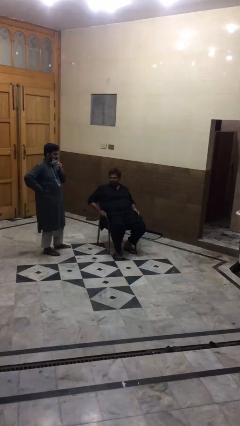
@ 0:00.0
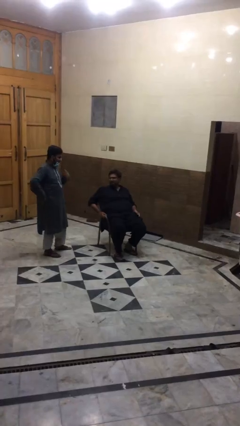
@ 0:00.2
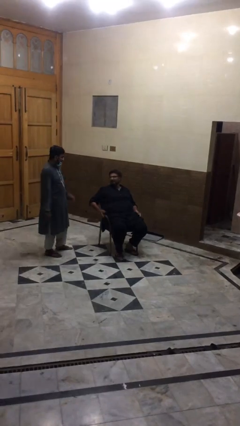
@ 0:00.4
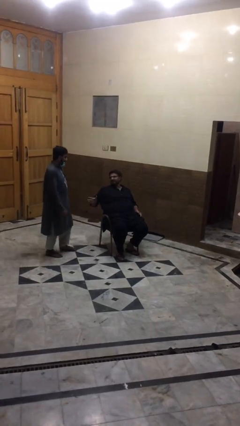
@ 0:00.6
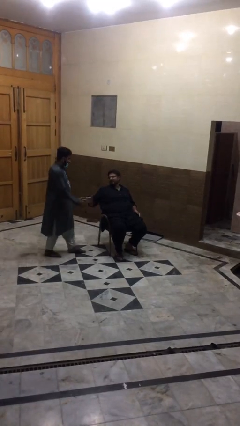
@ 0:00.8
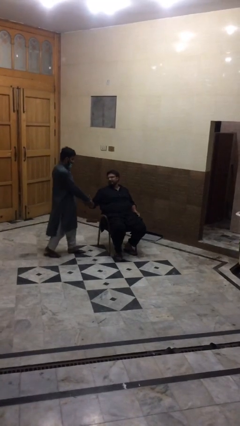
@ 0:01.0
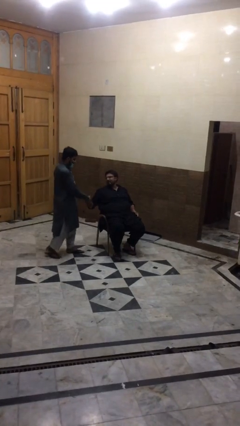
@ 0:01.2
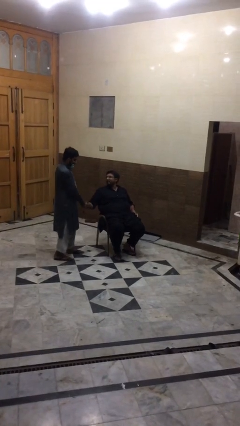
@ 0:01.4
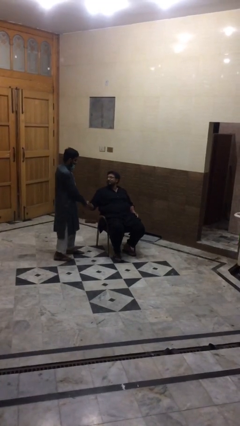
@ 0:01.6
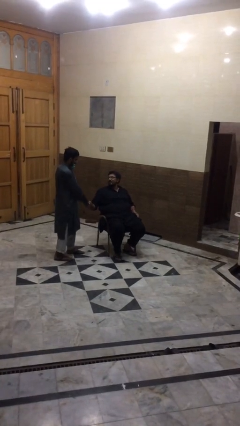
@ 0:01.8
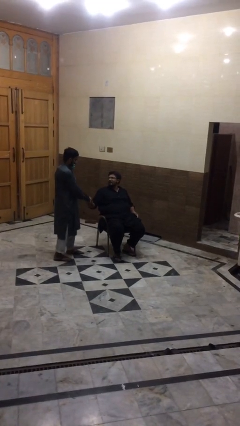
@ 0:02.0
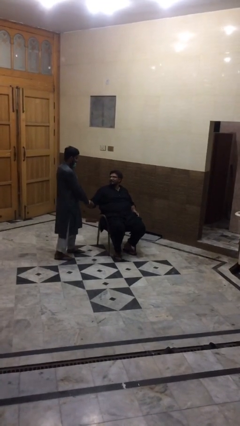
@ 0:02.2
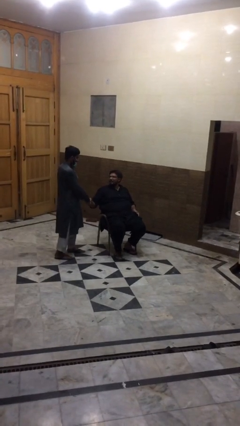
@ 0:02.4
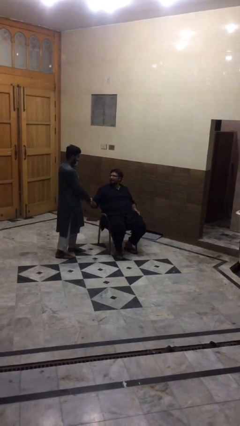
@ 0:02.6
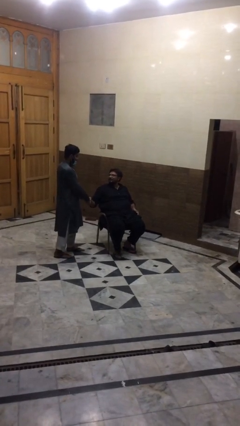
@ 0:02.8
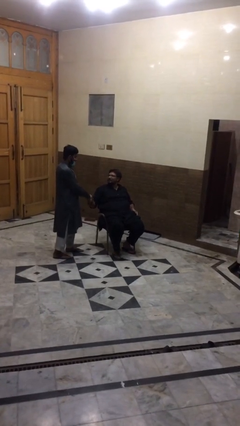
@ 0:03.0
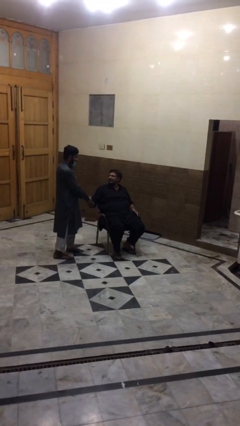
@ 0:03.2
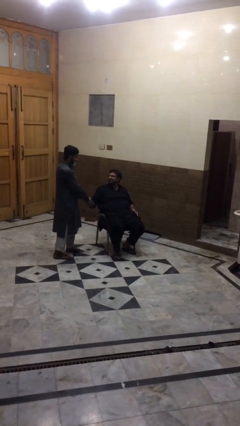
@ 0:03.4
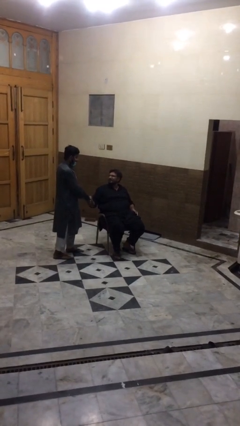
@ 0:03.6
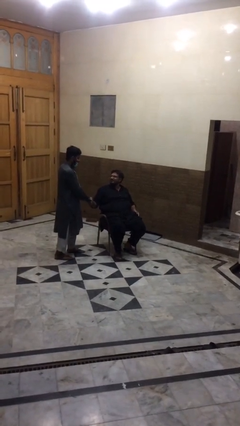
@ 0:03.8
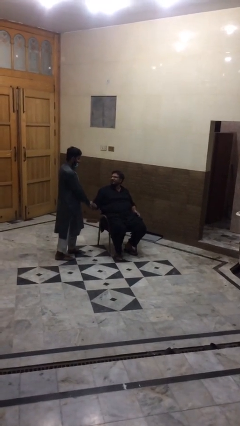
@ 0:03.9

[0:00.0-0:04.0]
person shakes hand

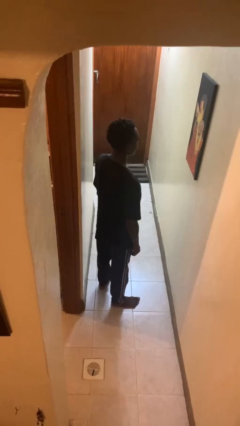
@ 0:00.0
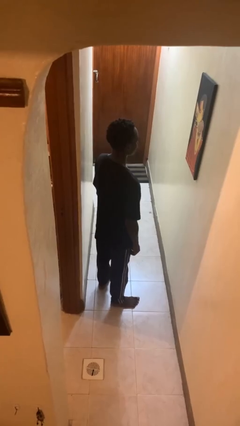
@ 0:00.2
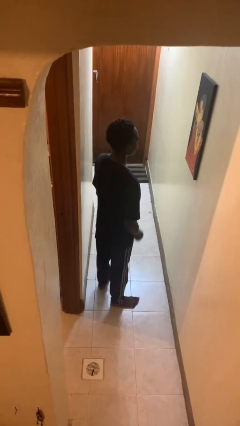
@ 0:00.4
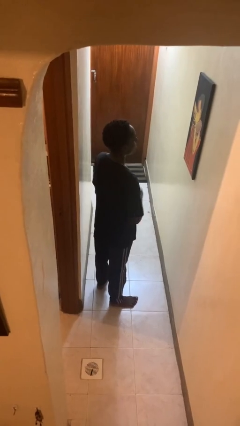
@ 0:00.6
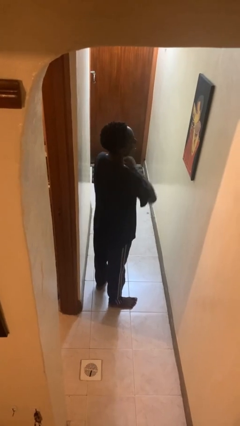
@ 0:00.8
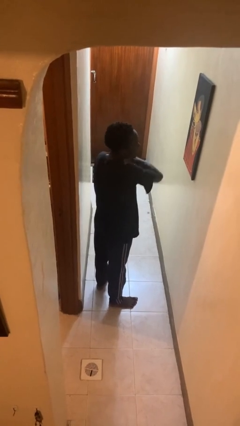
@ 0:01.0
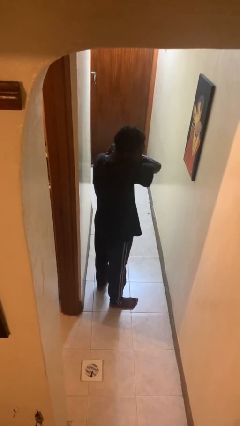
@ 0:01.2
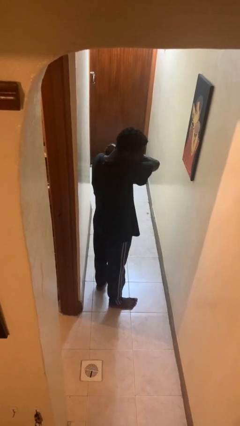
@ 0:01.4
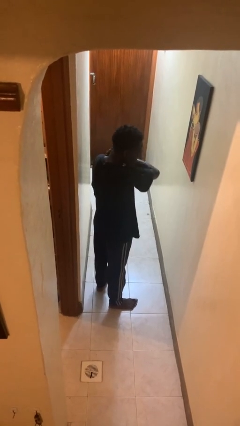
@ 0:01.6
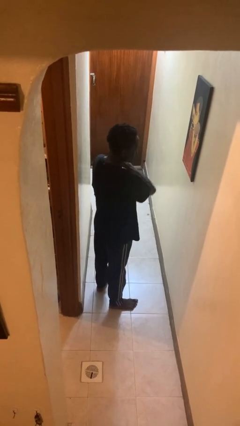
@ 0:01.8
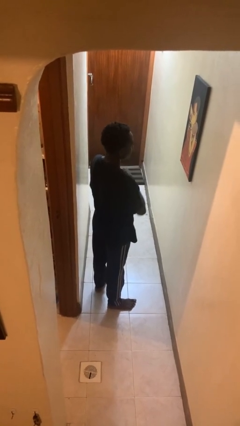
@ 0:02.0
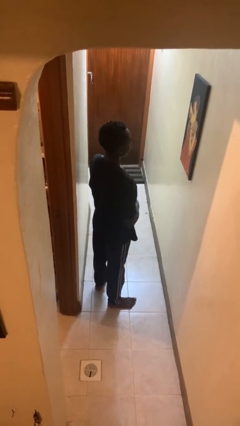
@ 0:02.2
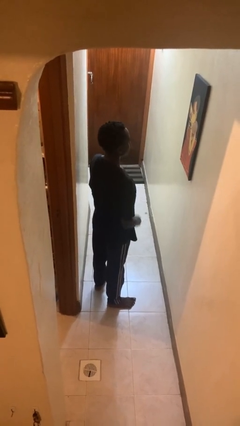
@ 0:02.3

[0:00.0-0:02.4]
person sneezes into arm

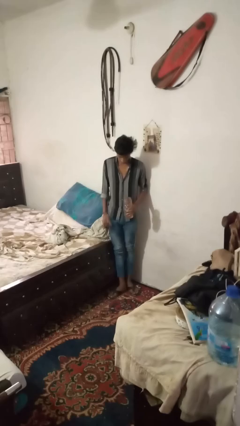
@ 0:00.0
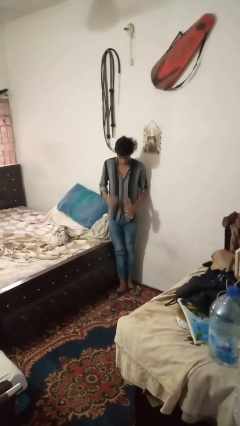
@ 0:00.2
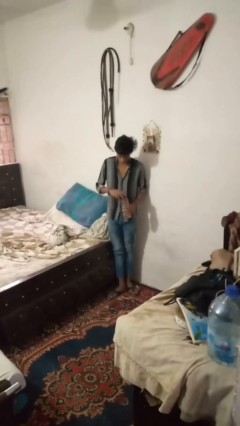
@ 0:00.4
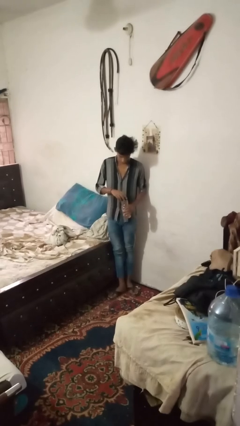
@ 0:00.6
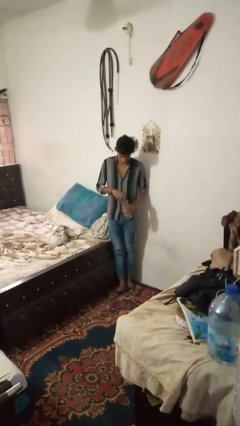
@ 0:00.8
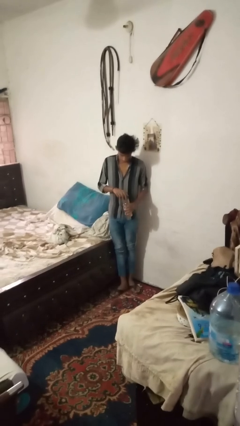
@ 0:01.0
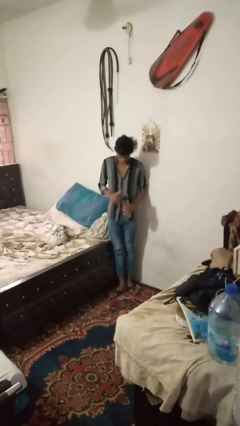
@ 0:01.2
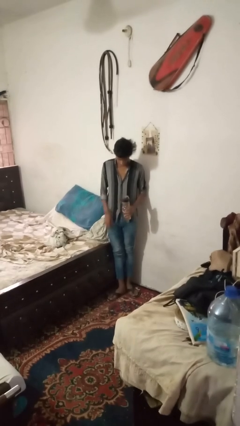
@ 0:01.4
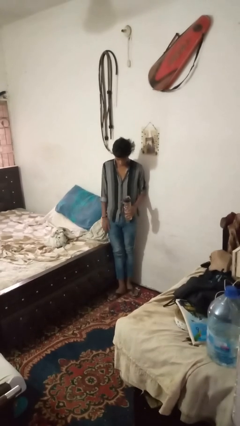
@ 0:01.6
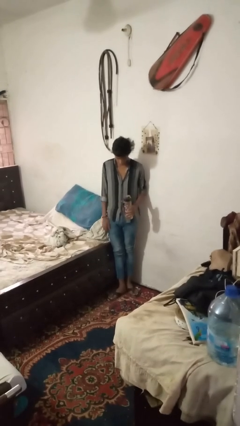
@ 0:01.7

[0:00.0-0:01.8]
person screws lid to bottle

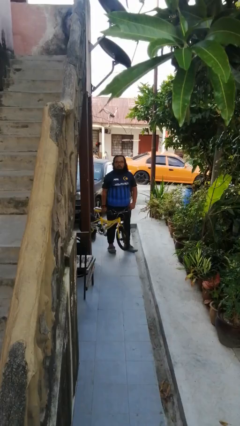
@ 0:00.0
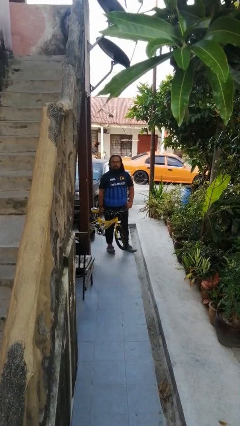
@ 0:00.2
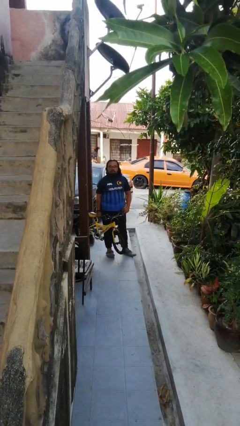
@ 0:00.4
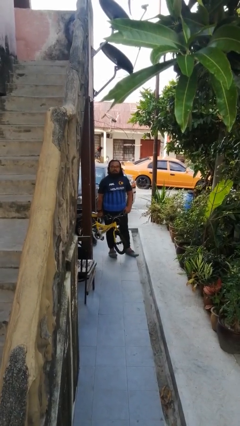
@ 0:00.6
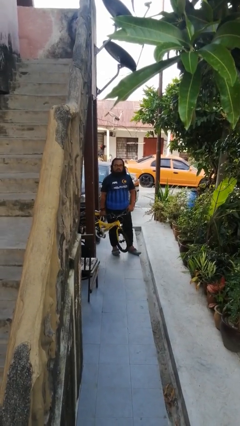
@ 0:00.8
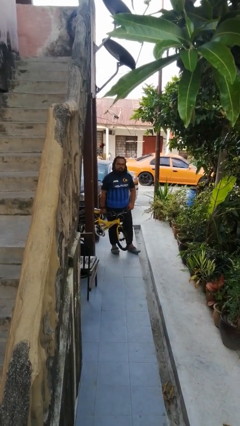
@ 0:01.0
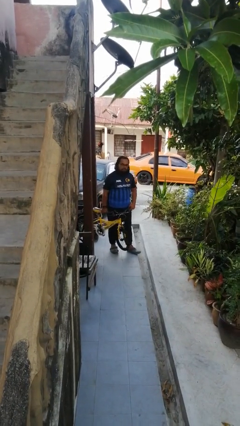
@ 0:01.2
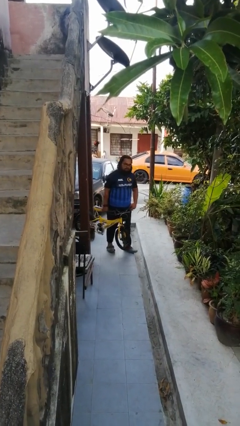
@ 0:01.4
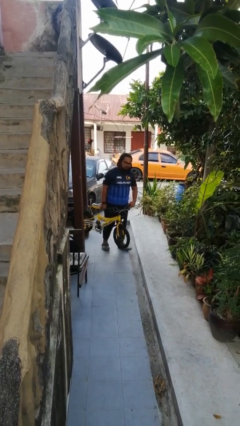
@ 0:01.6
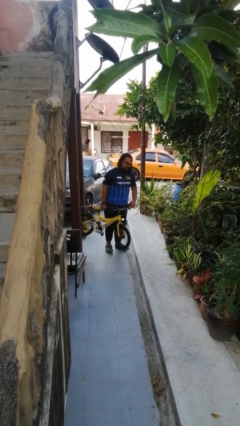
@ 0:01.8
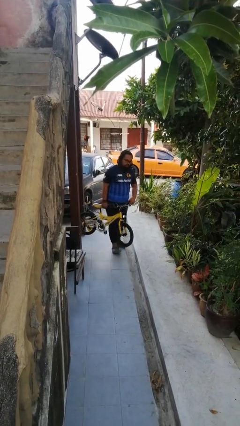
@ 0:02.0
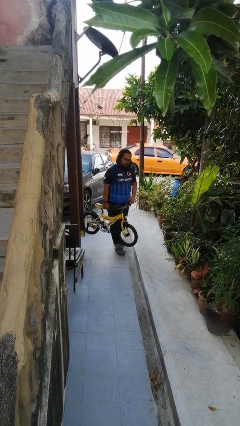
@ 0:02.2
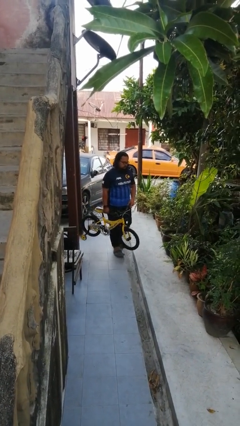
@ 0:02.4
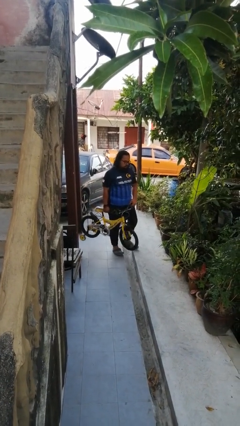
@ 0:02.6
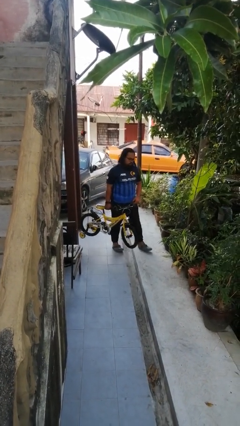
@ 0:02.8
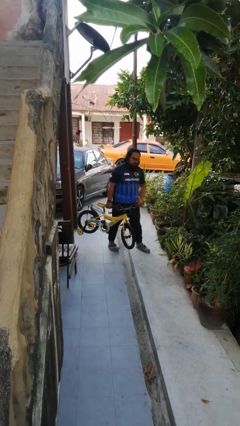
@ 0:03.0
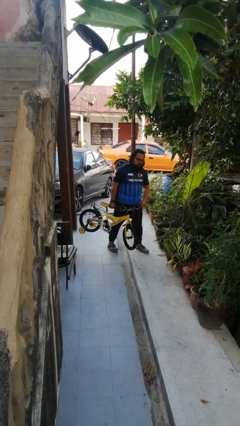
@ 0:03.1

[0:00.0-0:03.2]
person carries bicycle

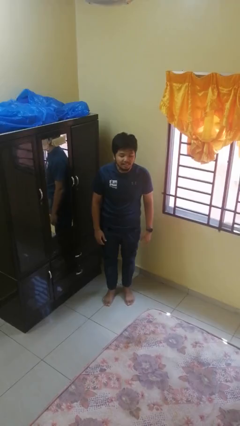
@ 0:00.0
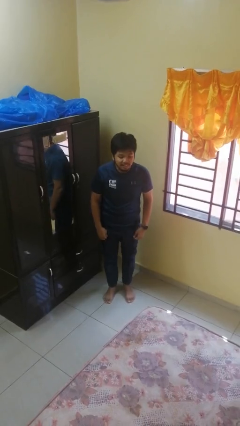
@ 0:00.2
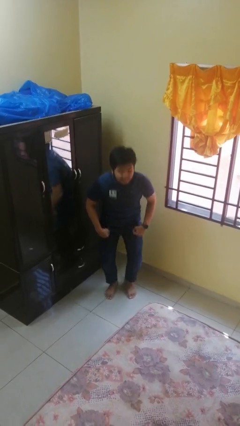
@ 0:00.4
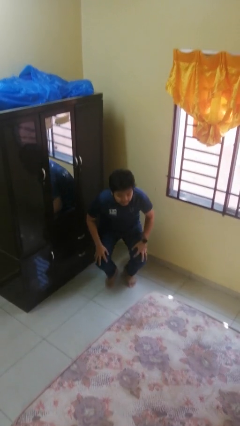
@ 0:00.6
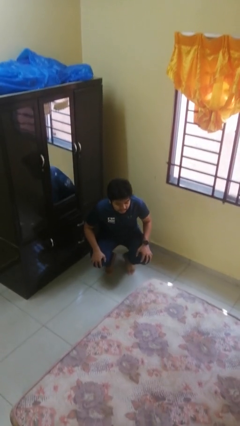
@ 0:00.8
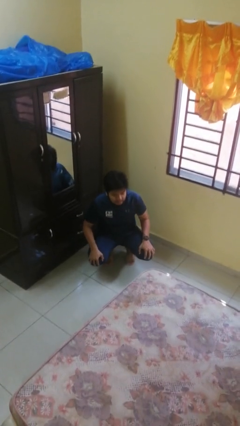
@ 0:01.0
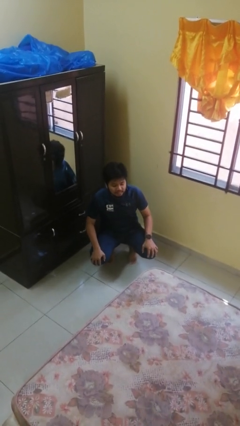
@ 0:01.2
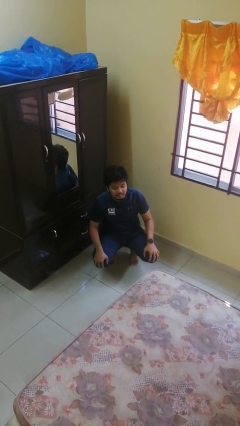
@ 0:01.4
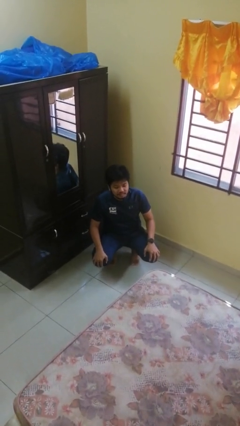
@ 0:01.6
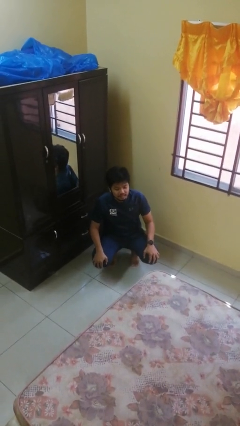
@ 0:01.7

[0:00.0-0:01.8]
person squats

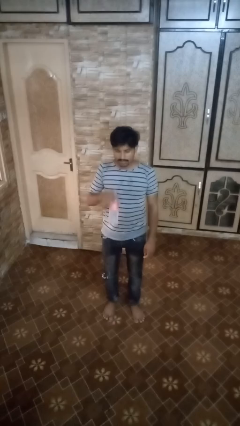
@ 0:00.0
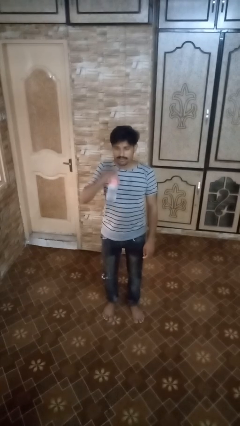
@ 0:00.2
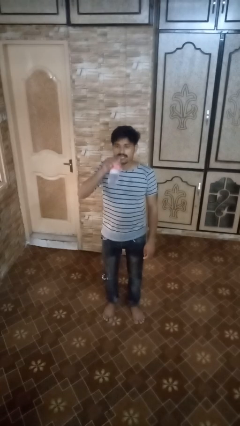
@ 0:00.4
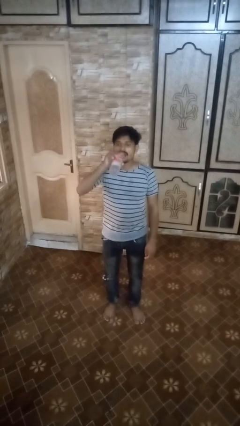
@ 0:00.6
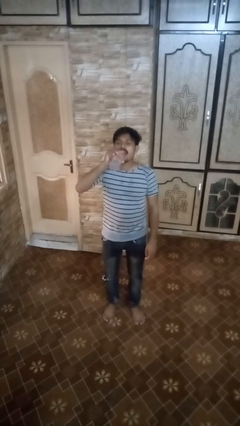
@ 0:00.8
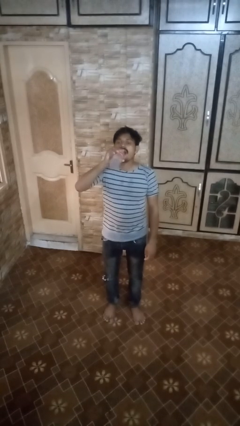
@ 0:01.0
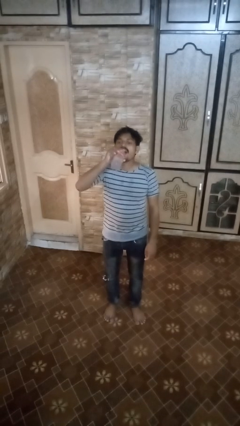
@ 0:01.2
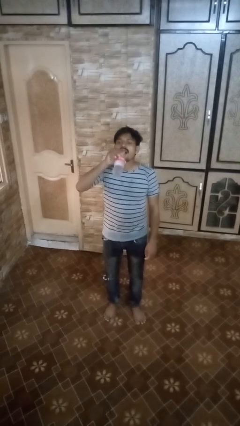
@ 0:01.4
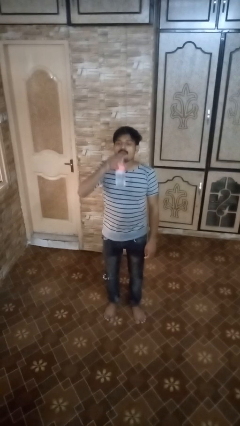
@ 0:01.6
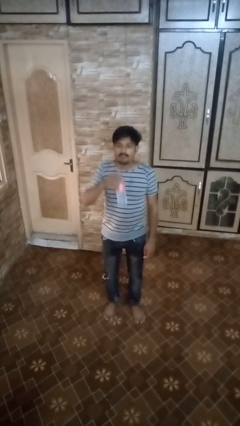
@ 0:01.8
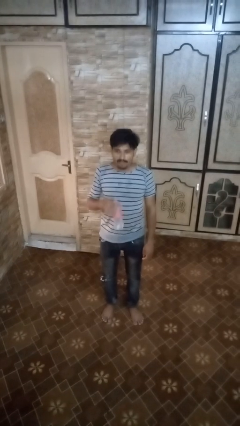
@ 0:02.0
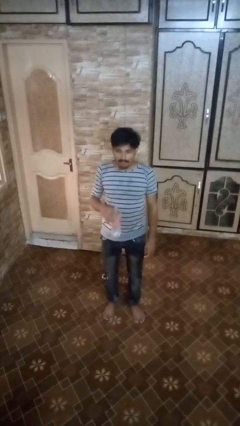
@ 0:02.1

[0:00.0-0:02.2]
person drinks from bottle

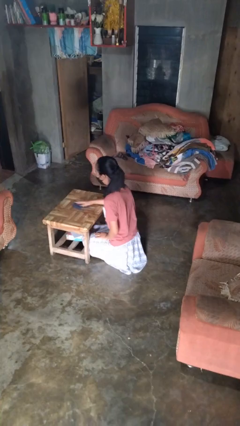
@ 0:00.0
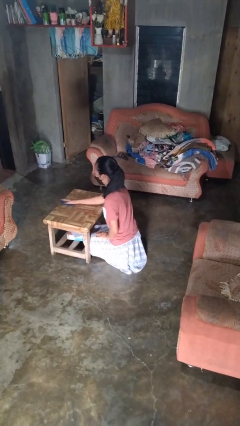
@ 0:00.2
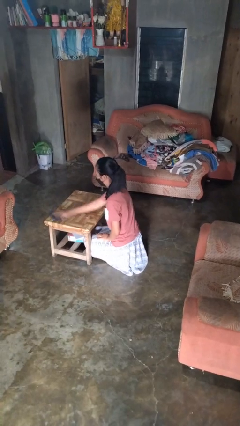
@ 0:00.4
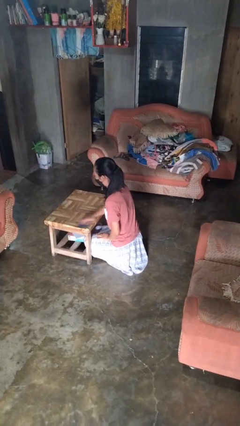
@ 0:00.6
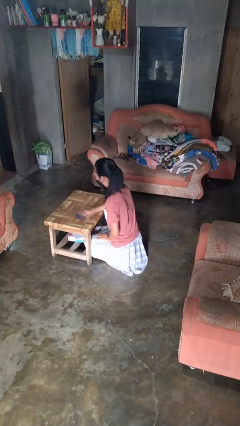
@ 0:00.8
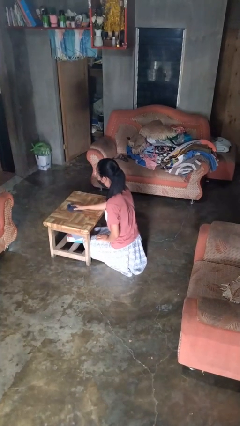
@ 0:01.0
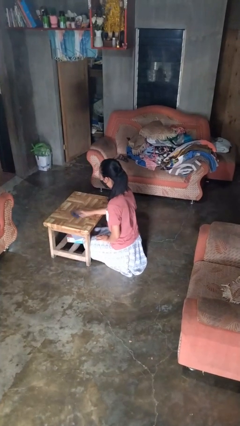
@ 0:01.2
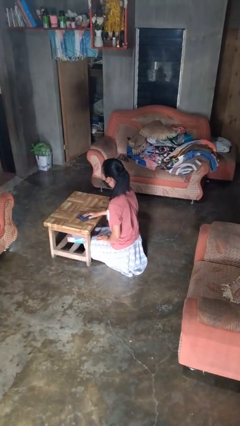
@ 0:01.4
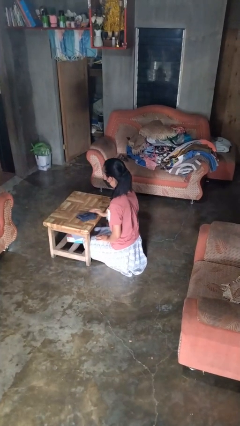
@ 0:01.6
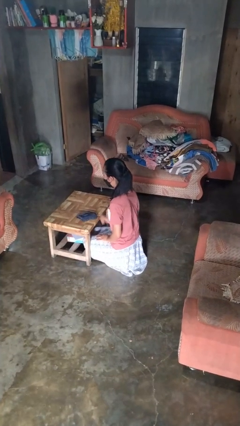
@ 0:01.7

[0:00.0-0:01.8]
person cleans table with rag
